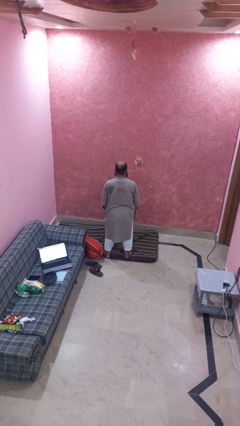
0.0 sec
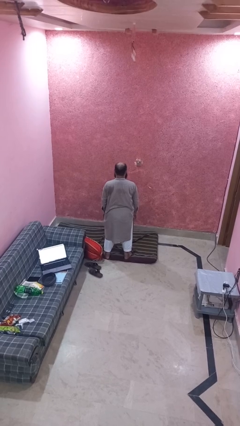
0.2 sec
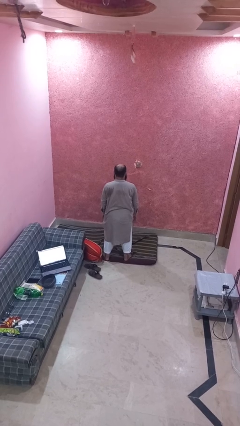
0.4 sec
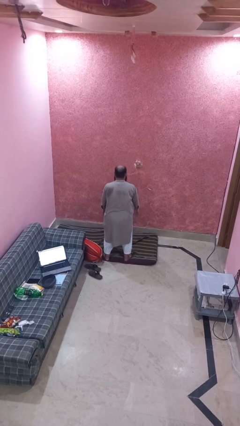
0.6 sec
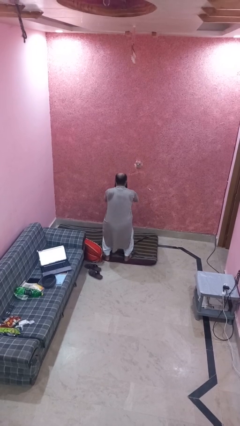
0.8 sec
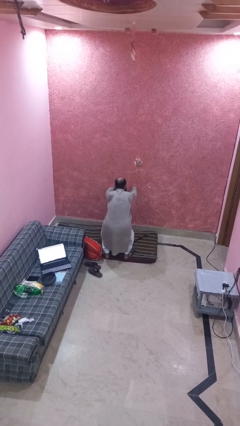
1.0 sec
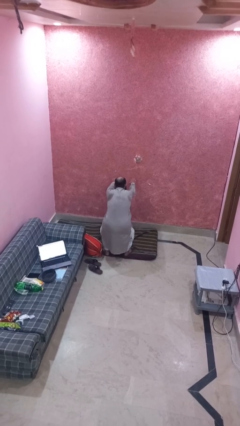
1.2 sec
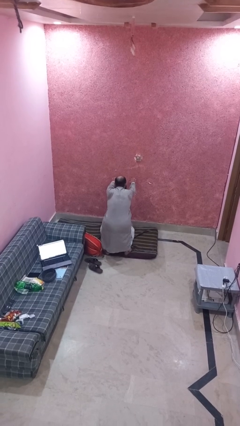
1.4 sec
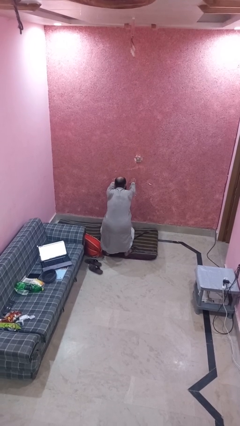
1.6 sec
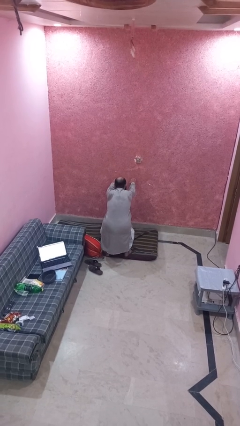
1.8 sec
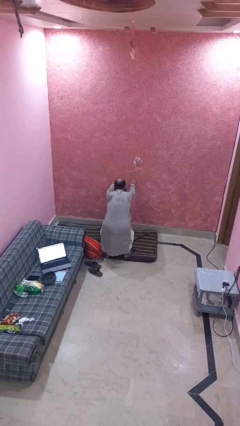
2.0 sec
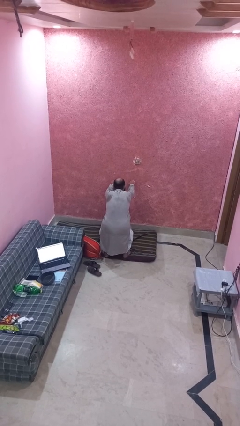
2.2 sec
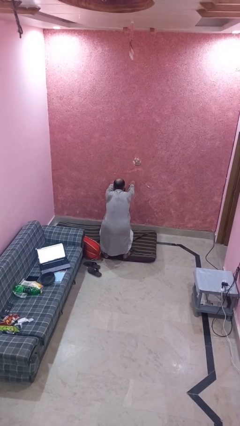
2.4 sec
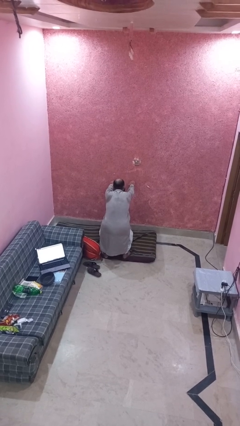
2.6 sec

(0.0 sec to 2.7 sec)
person squats

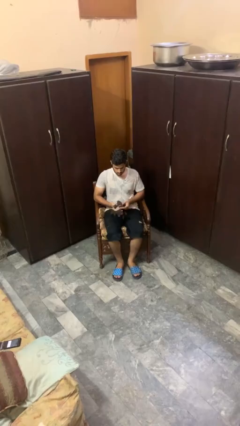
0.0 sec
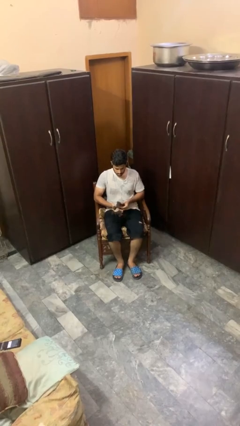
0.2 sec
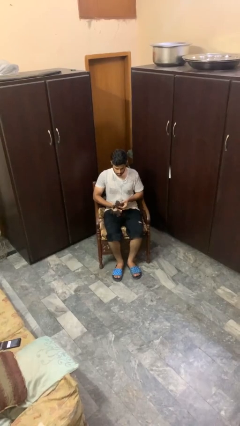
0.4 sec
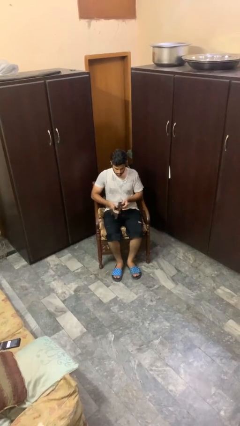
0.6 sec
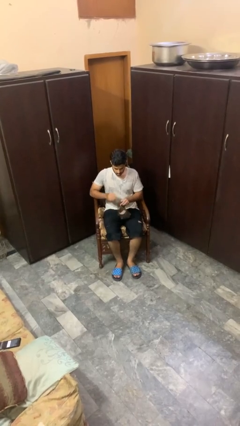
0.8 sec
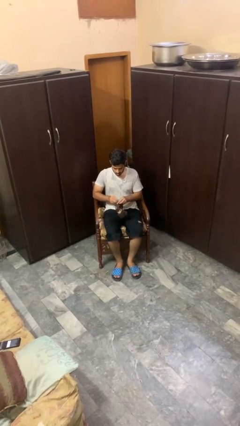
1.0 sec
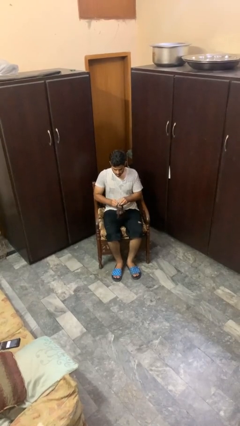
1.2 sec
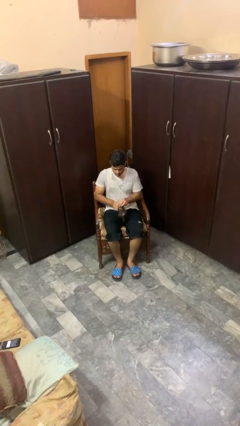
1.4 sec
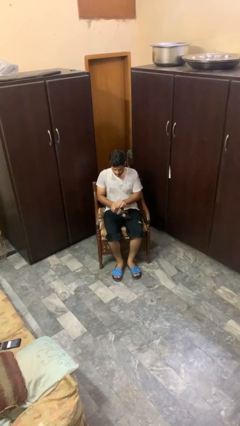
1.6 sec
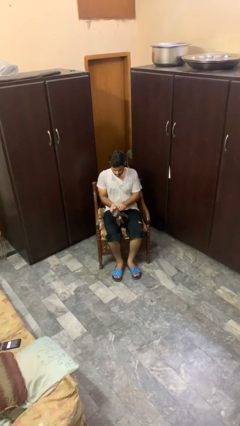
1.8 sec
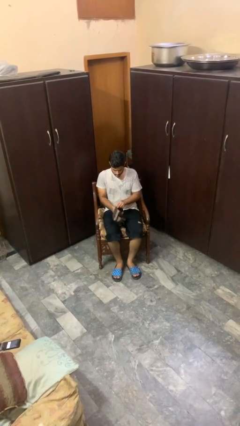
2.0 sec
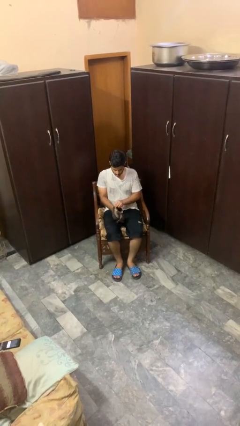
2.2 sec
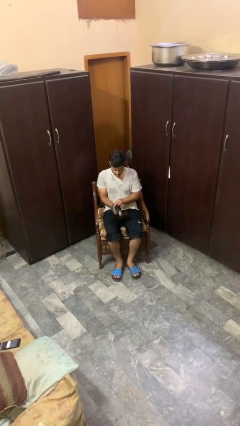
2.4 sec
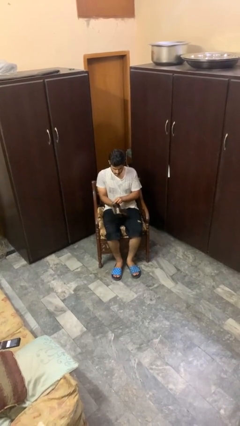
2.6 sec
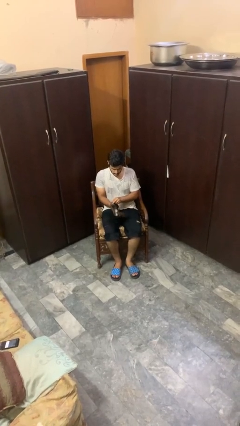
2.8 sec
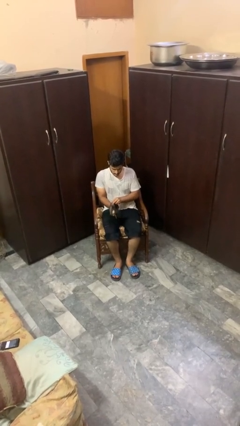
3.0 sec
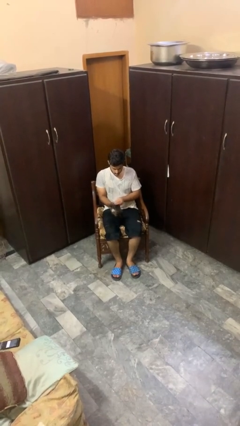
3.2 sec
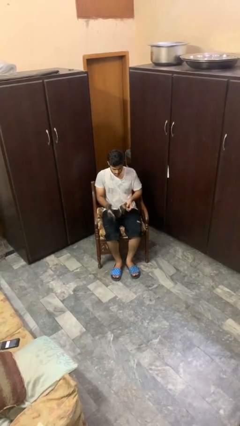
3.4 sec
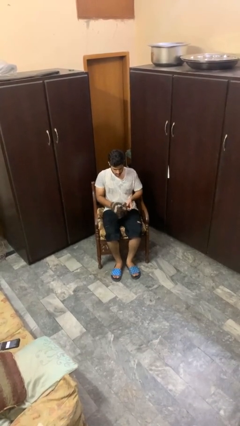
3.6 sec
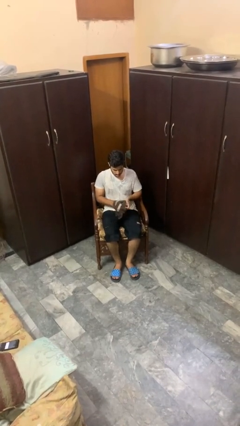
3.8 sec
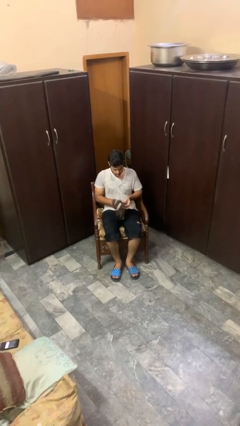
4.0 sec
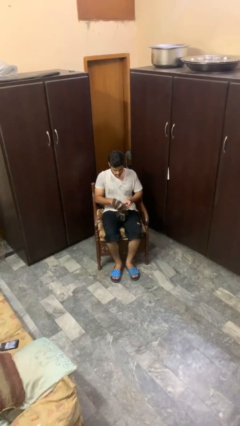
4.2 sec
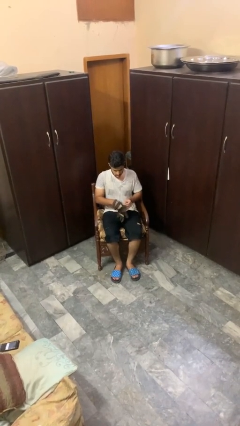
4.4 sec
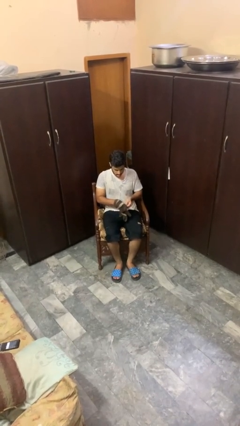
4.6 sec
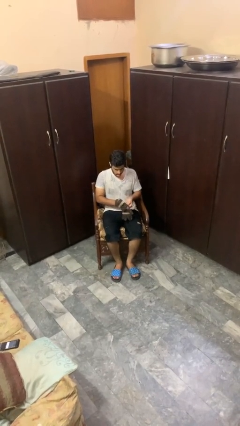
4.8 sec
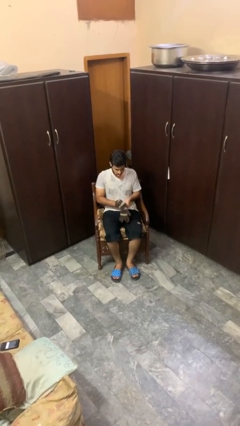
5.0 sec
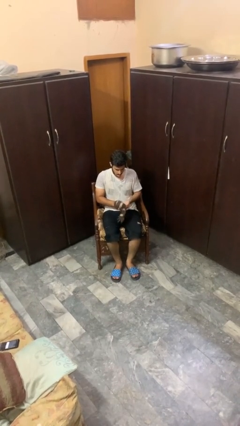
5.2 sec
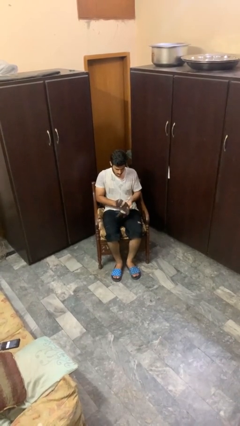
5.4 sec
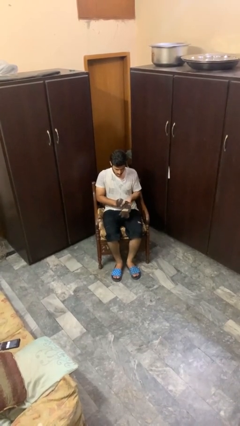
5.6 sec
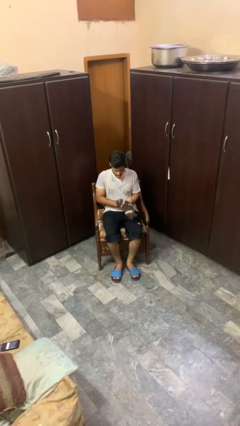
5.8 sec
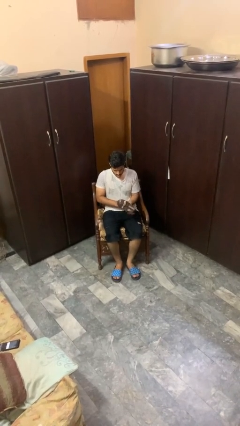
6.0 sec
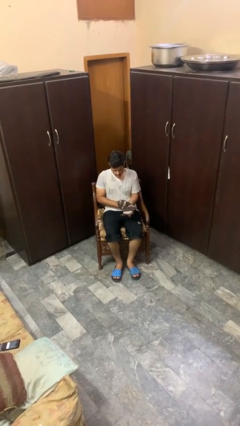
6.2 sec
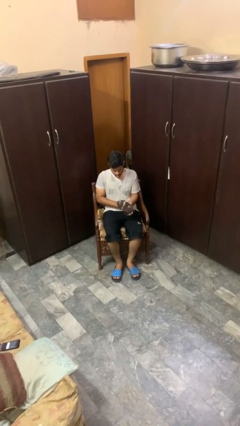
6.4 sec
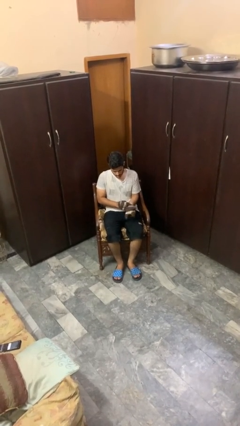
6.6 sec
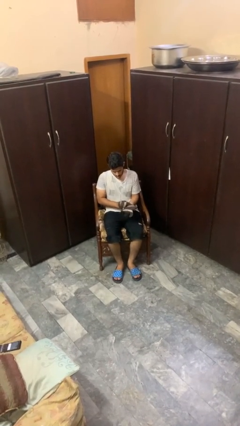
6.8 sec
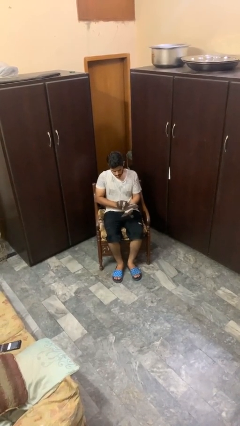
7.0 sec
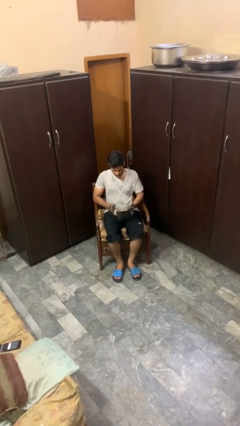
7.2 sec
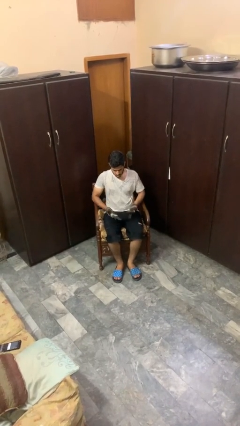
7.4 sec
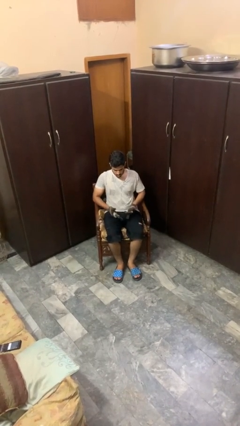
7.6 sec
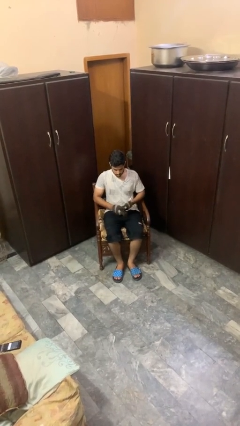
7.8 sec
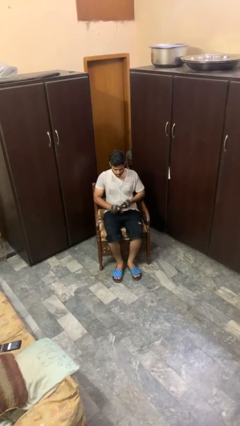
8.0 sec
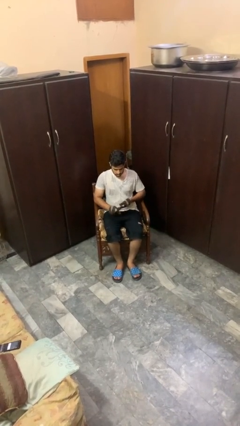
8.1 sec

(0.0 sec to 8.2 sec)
person puts on gloves

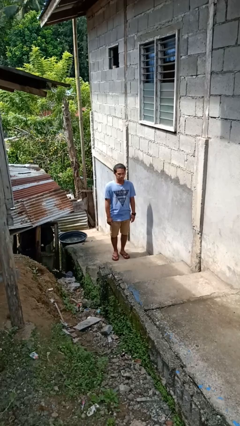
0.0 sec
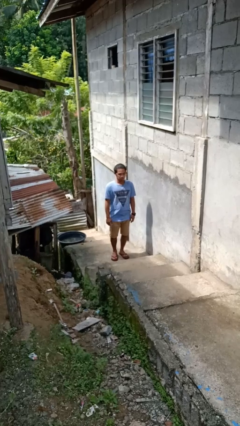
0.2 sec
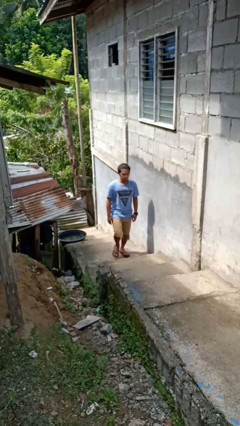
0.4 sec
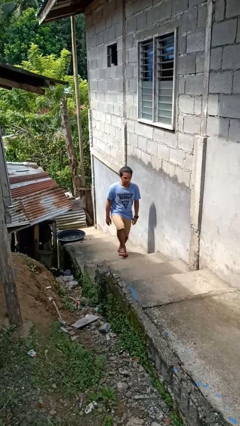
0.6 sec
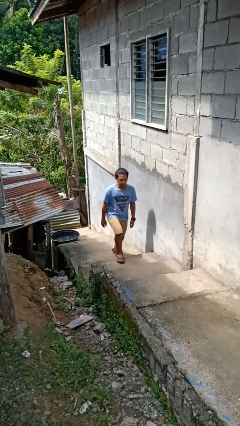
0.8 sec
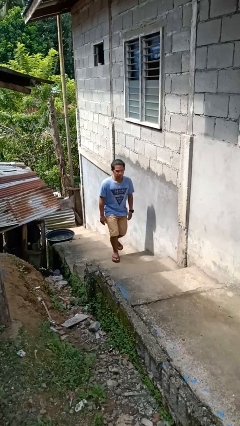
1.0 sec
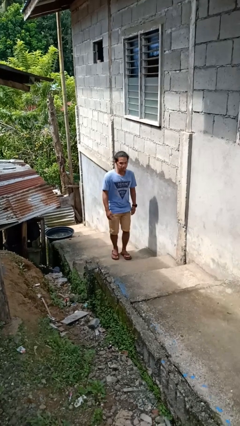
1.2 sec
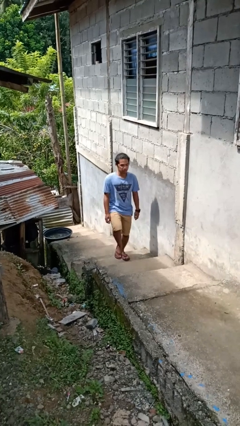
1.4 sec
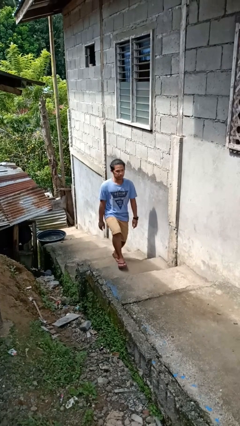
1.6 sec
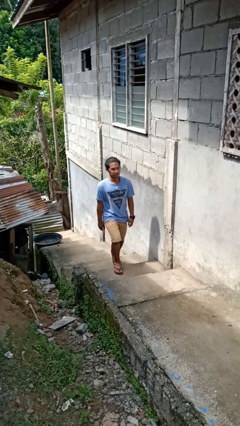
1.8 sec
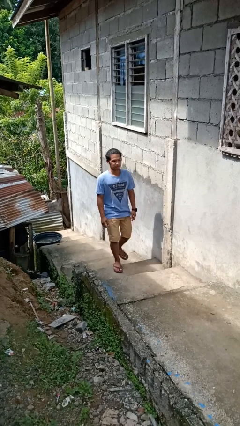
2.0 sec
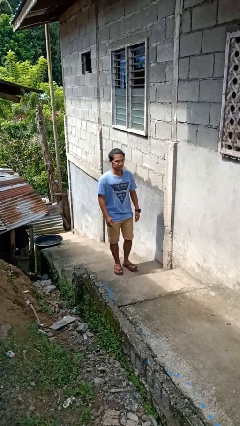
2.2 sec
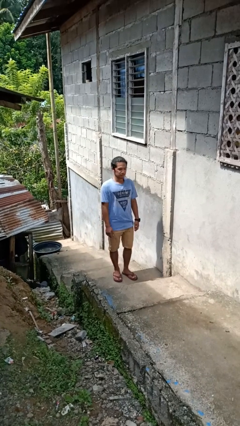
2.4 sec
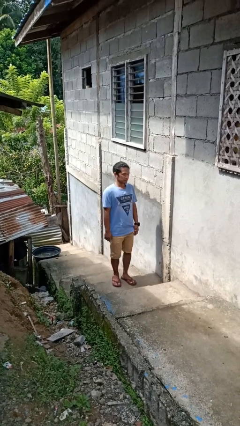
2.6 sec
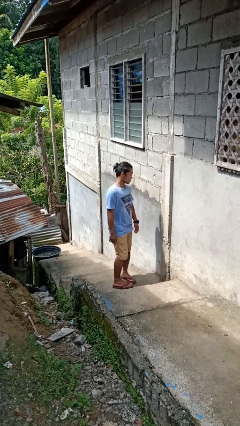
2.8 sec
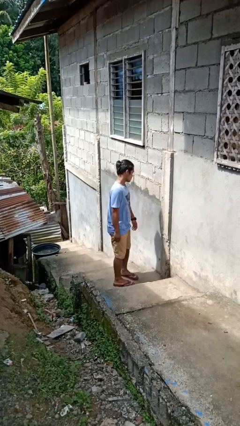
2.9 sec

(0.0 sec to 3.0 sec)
person climbs up stairs

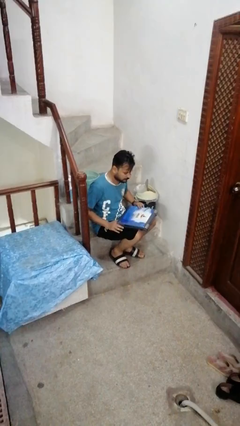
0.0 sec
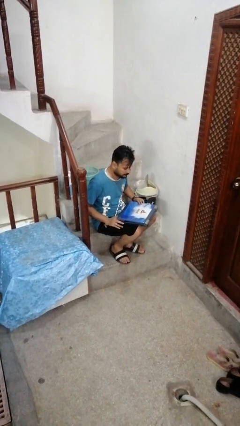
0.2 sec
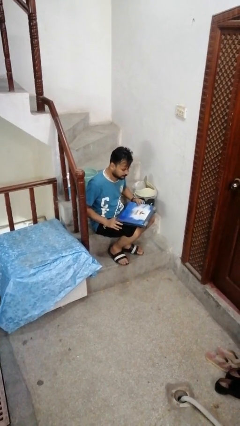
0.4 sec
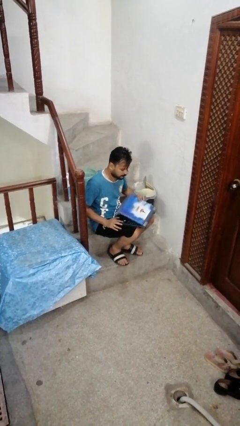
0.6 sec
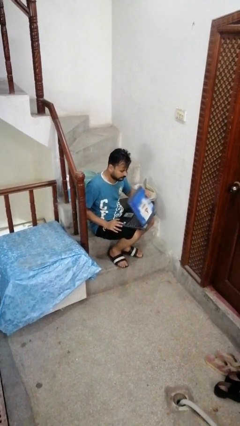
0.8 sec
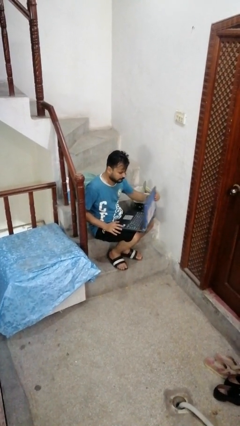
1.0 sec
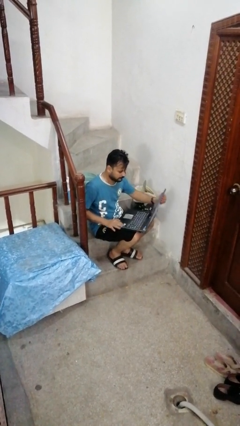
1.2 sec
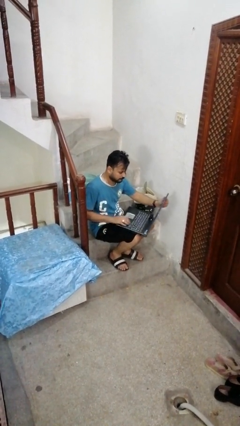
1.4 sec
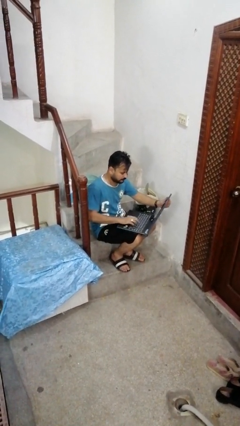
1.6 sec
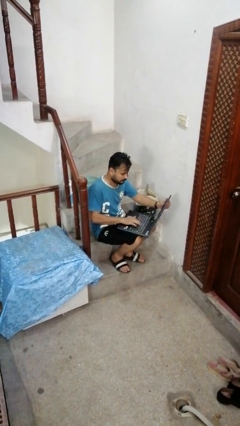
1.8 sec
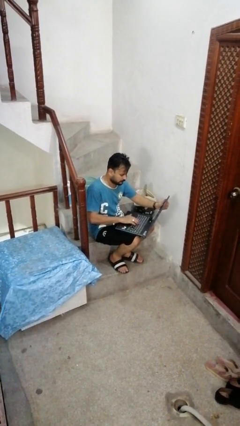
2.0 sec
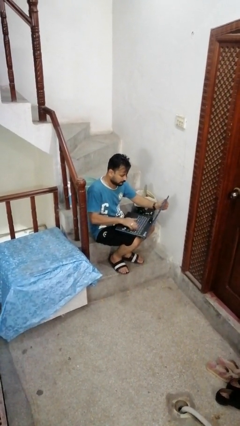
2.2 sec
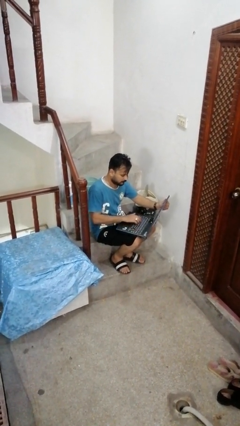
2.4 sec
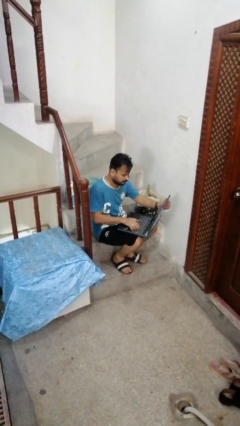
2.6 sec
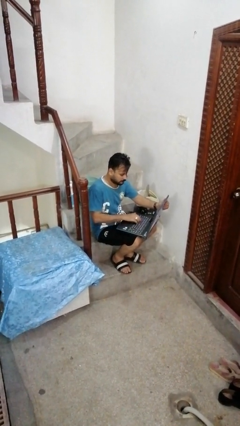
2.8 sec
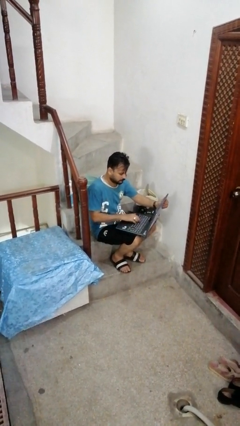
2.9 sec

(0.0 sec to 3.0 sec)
person opens laptop

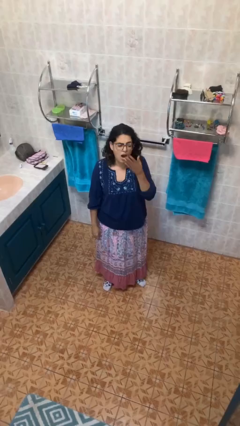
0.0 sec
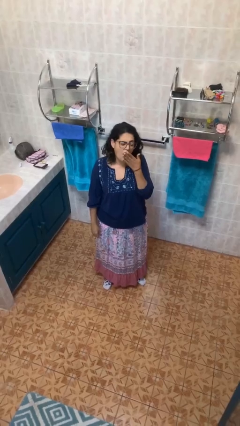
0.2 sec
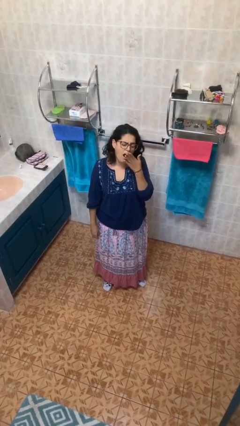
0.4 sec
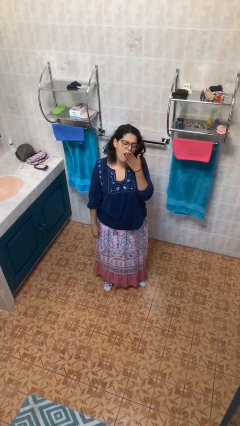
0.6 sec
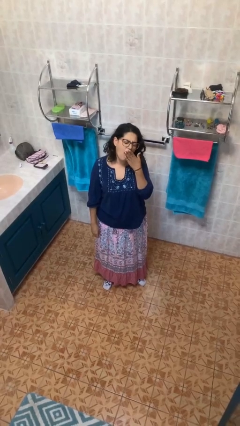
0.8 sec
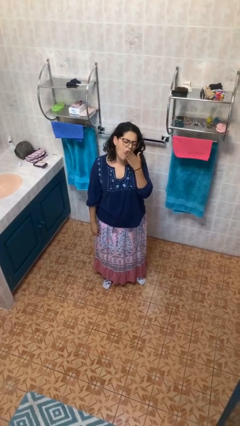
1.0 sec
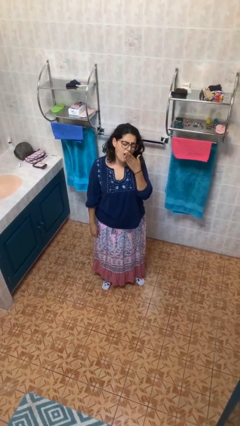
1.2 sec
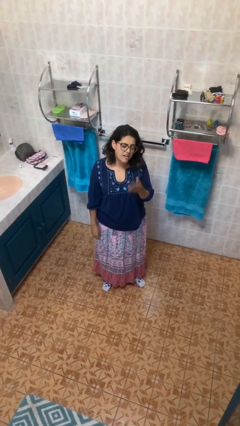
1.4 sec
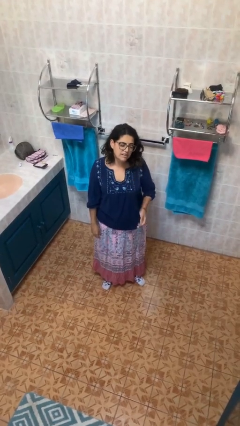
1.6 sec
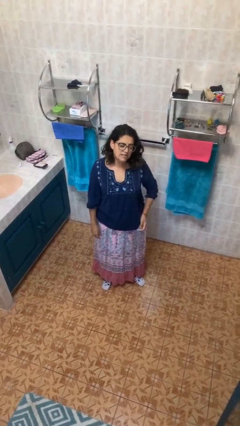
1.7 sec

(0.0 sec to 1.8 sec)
person yawns
